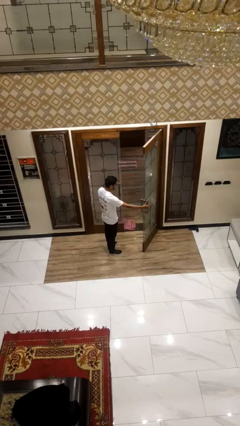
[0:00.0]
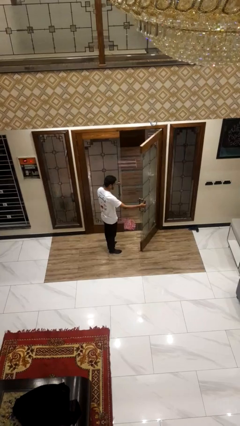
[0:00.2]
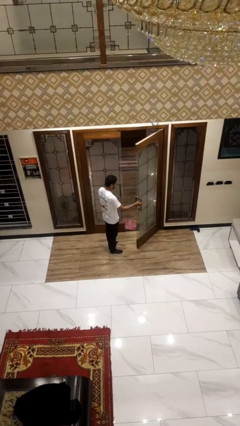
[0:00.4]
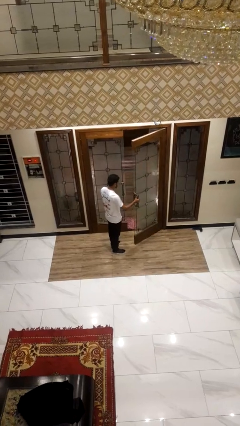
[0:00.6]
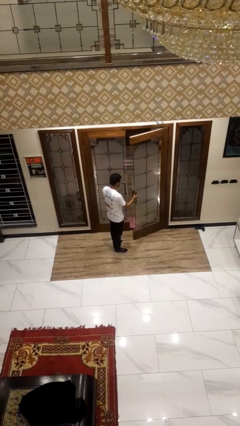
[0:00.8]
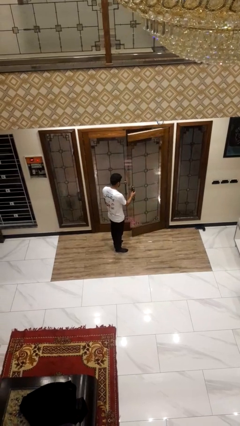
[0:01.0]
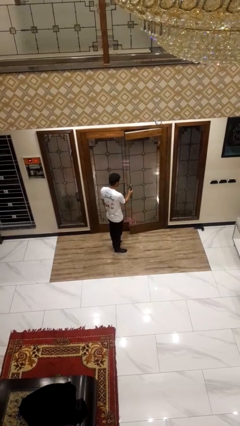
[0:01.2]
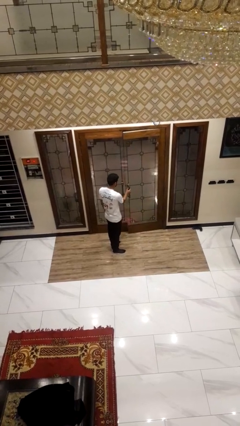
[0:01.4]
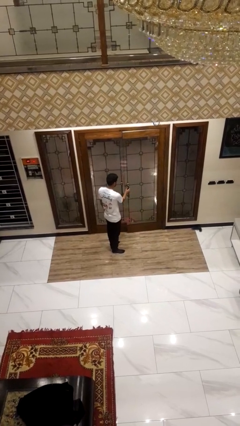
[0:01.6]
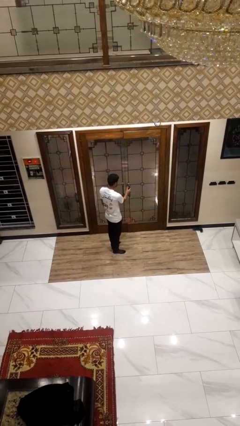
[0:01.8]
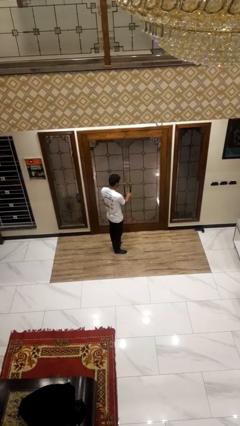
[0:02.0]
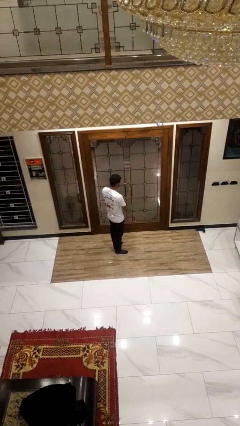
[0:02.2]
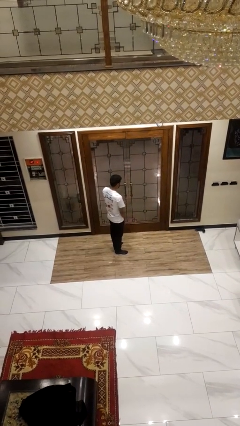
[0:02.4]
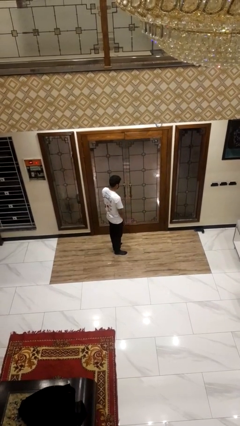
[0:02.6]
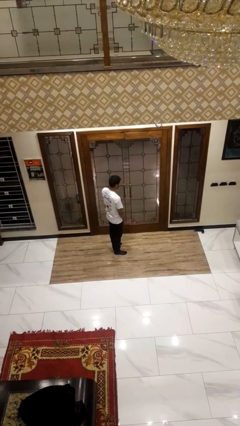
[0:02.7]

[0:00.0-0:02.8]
person closes facility door

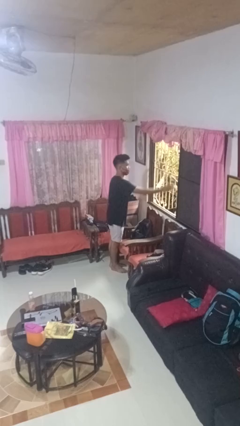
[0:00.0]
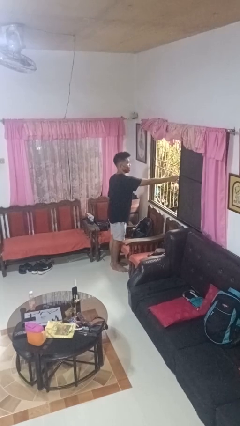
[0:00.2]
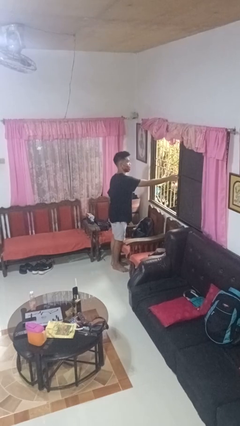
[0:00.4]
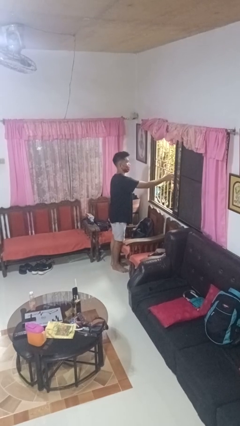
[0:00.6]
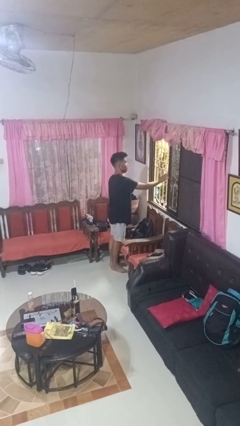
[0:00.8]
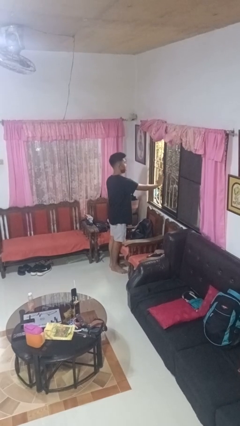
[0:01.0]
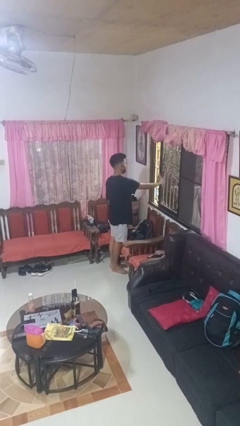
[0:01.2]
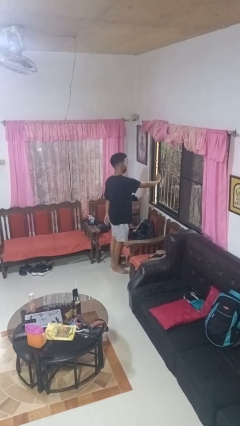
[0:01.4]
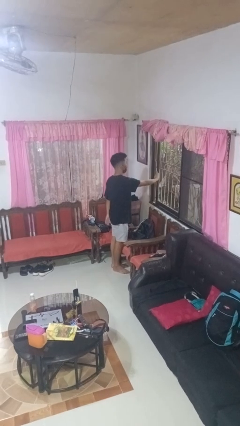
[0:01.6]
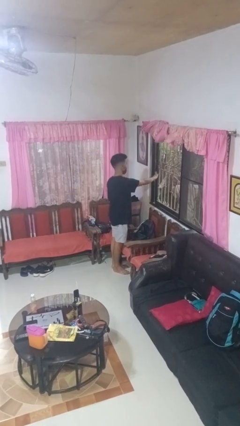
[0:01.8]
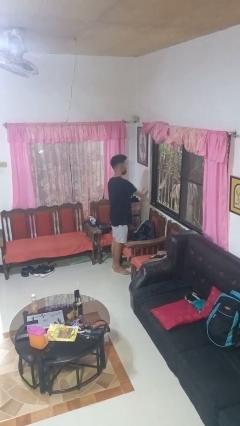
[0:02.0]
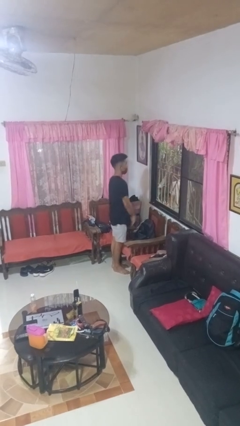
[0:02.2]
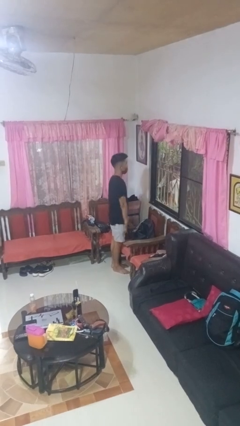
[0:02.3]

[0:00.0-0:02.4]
person closes home window

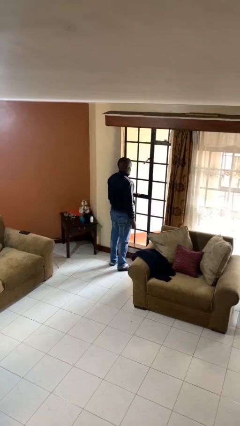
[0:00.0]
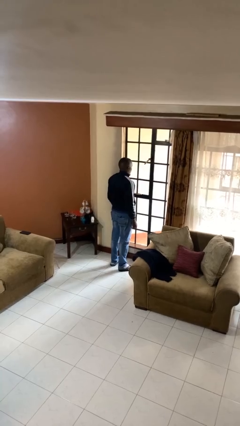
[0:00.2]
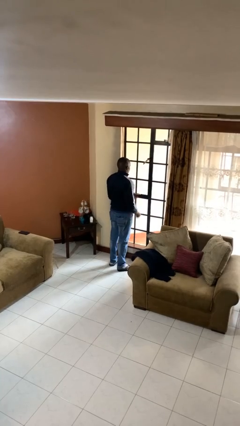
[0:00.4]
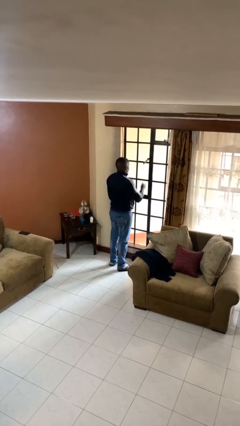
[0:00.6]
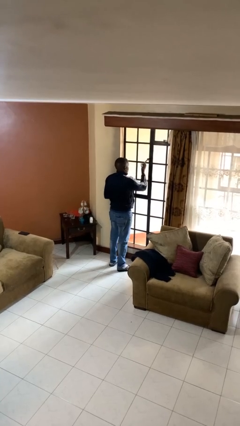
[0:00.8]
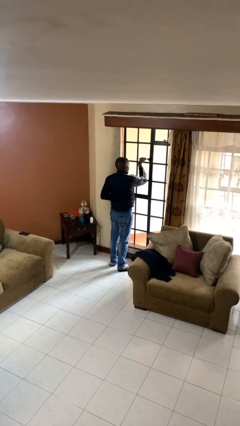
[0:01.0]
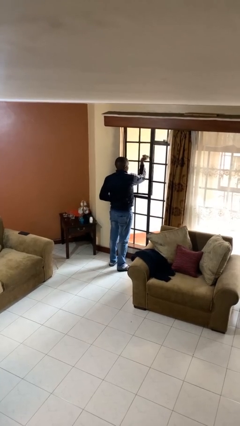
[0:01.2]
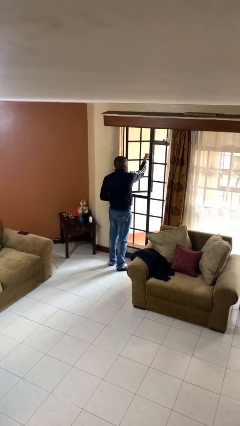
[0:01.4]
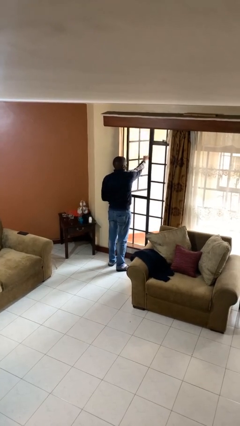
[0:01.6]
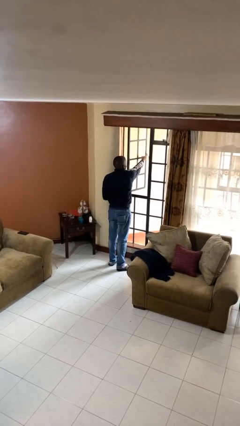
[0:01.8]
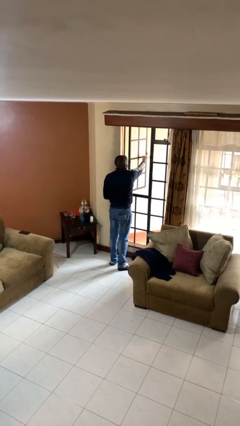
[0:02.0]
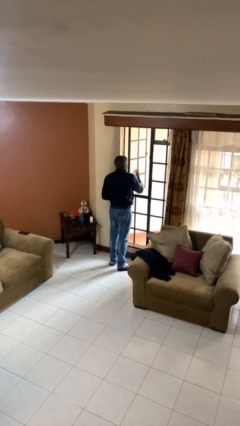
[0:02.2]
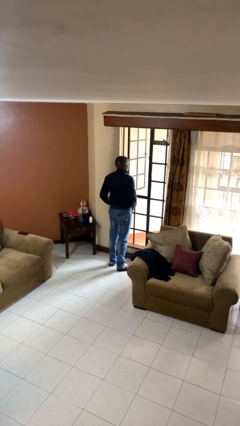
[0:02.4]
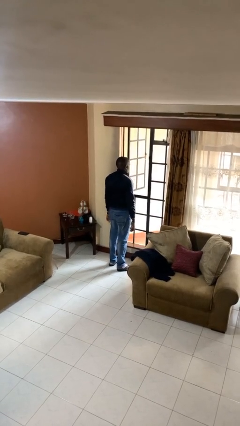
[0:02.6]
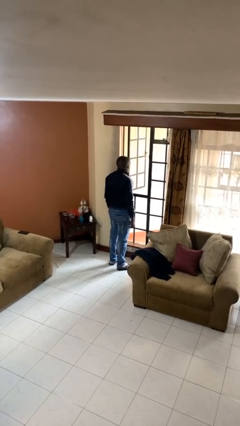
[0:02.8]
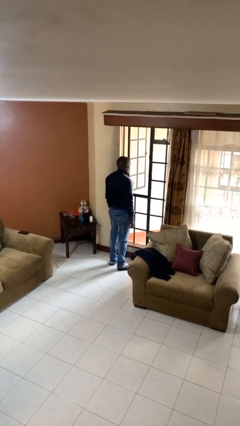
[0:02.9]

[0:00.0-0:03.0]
person opens home window

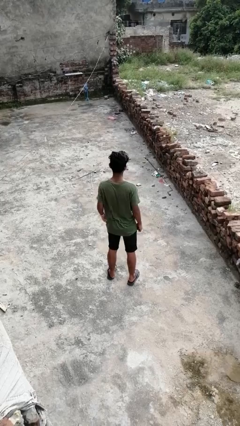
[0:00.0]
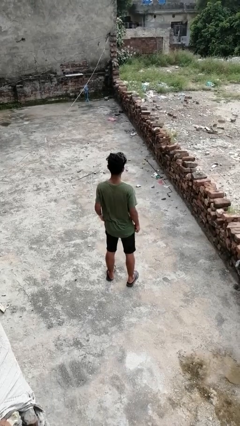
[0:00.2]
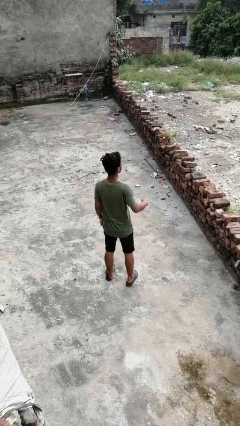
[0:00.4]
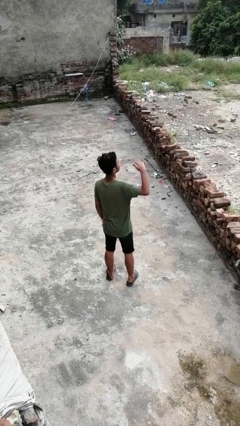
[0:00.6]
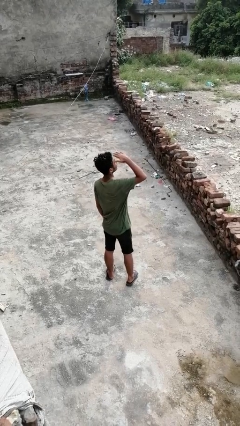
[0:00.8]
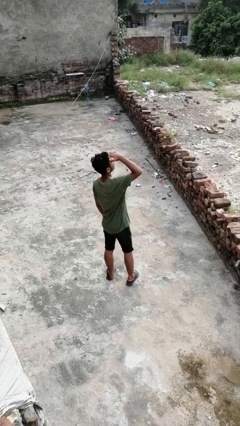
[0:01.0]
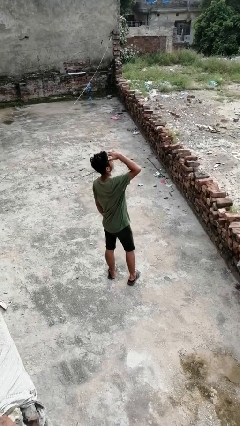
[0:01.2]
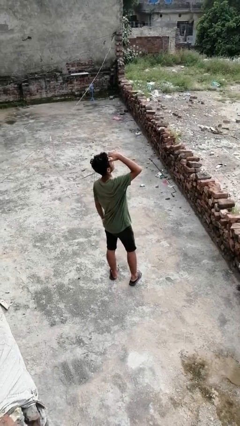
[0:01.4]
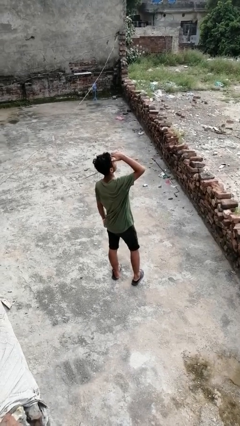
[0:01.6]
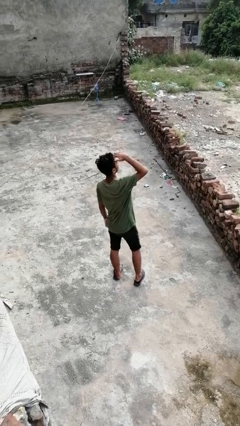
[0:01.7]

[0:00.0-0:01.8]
person shades eyes

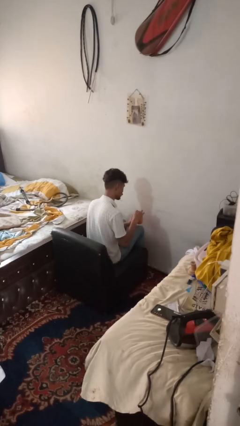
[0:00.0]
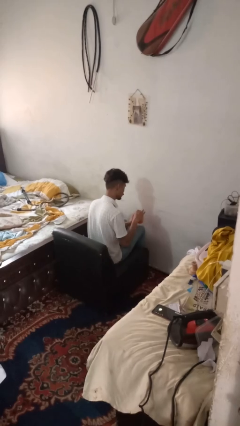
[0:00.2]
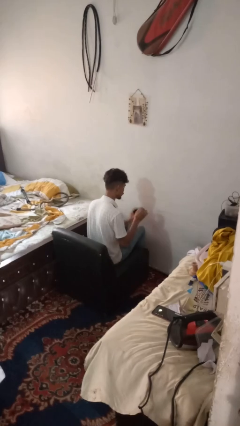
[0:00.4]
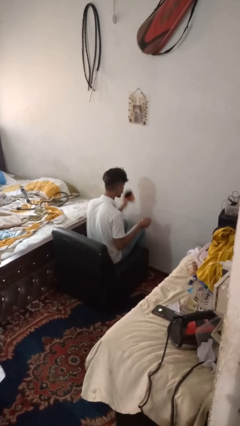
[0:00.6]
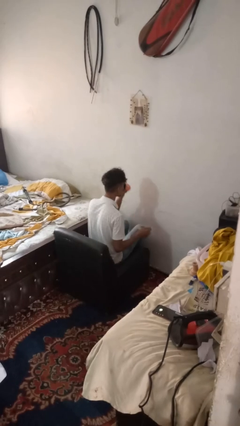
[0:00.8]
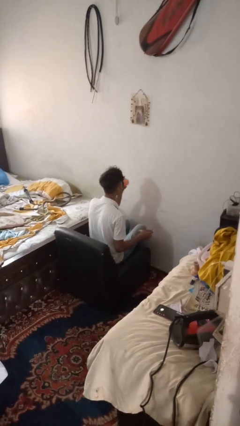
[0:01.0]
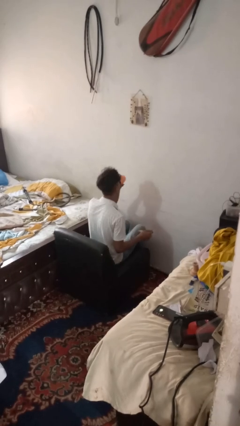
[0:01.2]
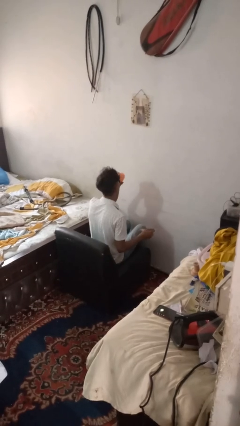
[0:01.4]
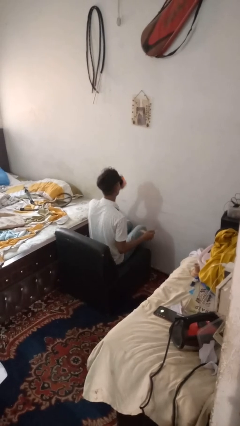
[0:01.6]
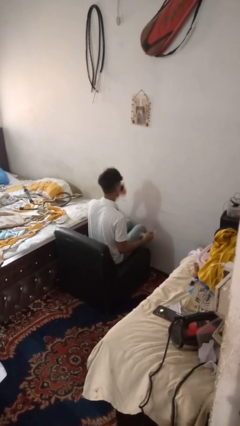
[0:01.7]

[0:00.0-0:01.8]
person drinks from mug

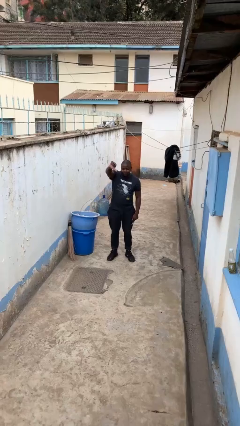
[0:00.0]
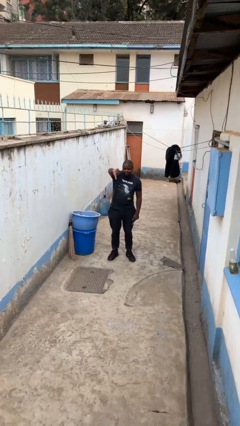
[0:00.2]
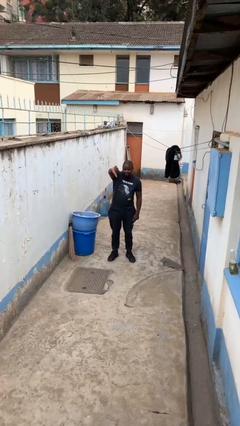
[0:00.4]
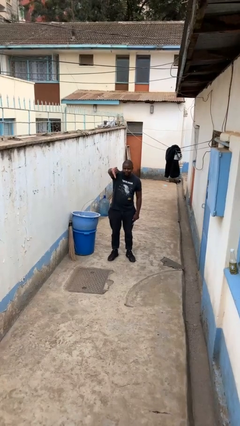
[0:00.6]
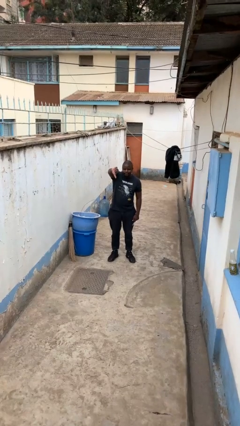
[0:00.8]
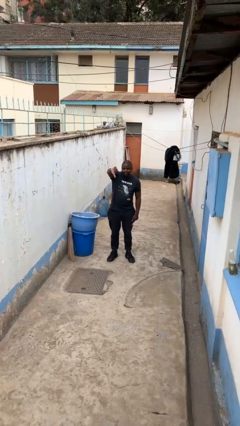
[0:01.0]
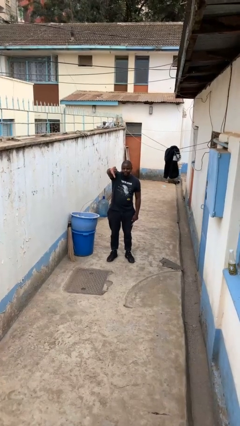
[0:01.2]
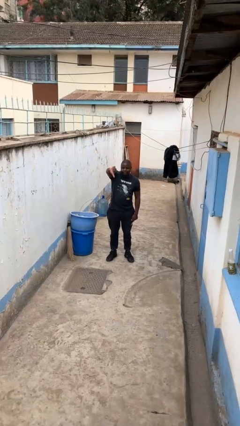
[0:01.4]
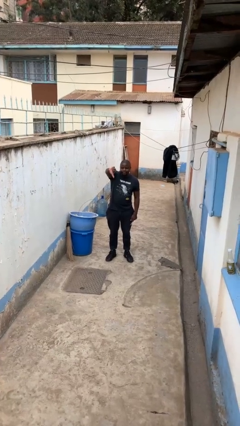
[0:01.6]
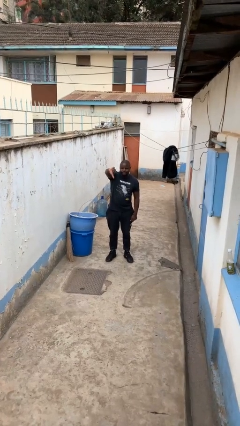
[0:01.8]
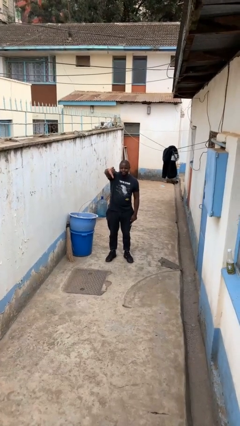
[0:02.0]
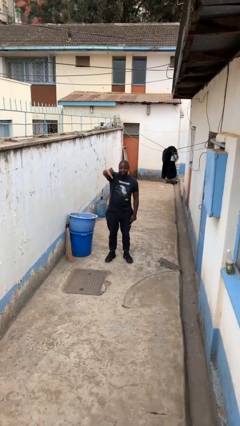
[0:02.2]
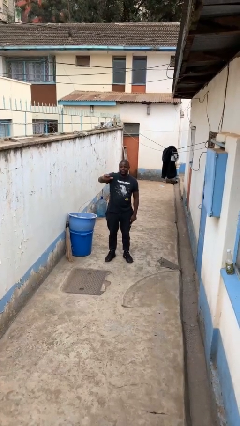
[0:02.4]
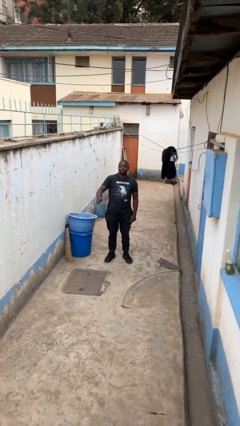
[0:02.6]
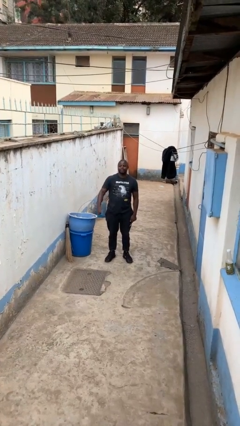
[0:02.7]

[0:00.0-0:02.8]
person gestures thumbs down

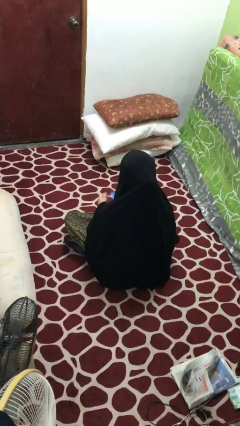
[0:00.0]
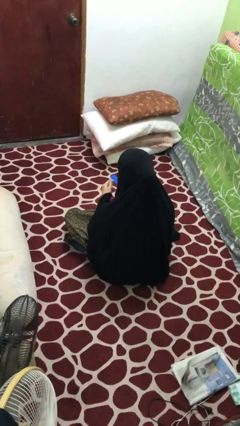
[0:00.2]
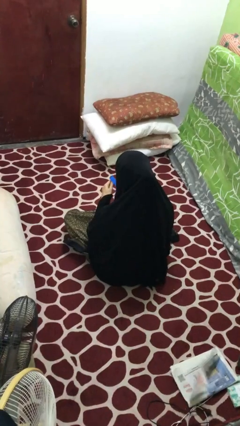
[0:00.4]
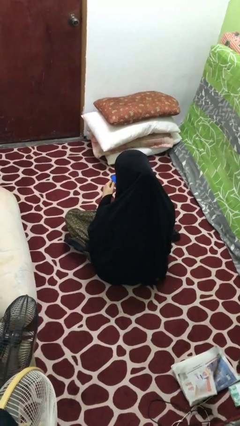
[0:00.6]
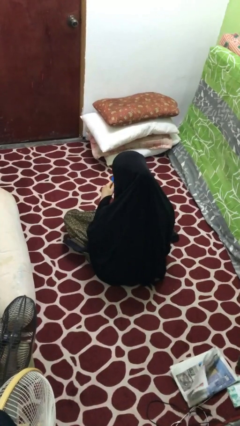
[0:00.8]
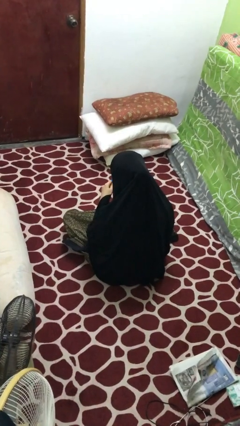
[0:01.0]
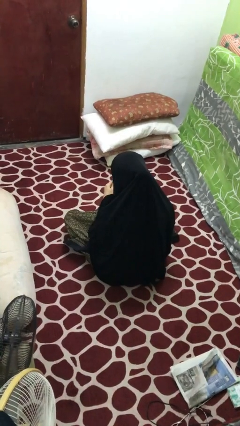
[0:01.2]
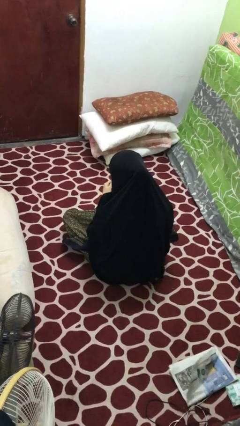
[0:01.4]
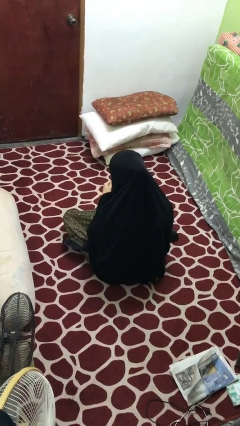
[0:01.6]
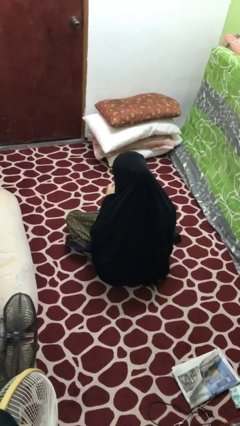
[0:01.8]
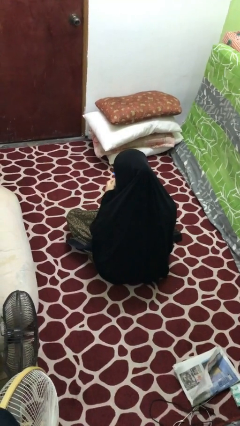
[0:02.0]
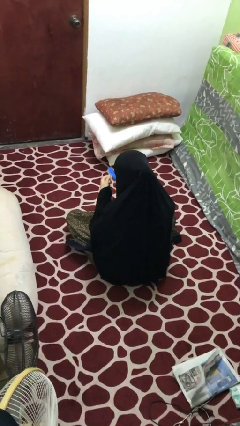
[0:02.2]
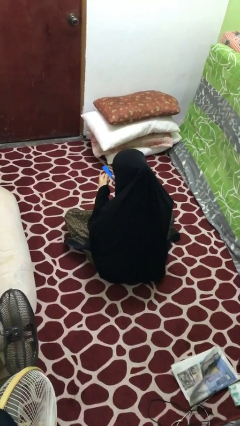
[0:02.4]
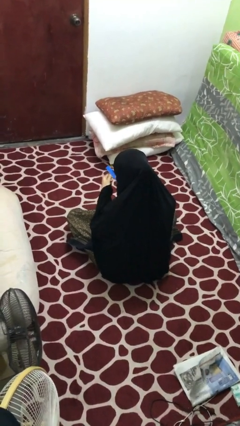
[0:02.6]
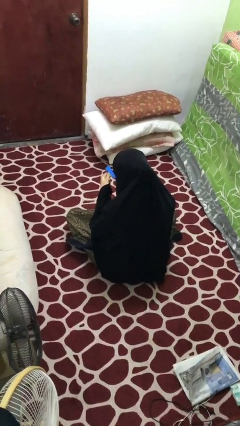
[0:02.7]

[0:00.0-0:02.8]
person files fingernails
